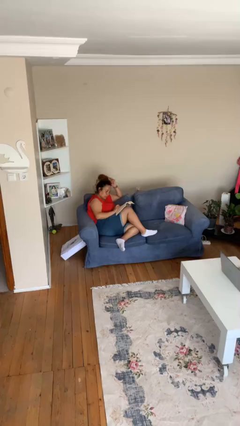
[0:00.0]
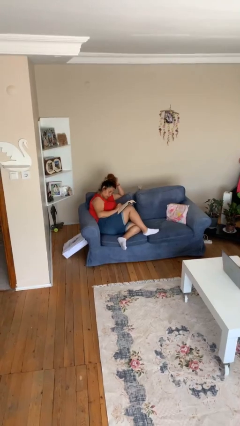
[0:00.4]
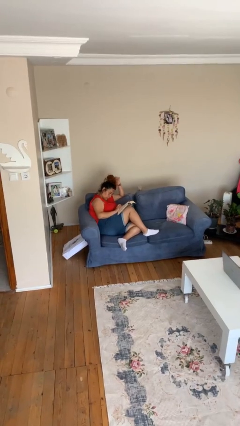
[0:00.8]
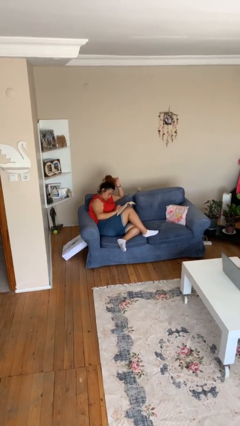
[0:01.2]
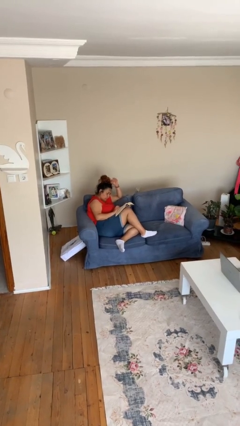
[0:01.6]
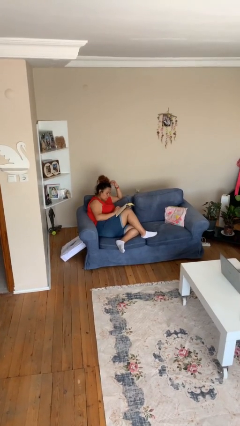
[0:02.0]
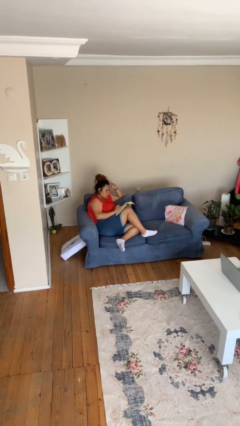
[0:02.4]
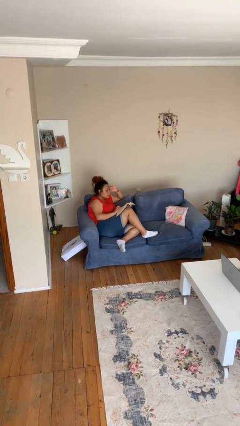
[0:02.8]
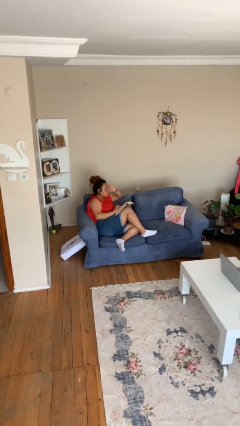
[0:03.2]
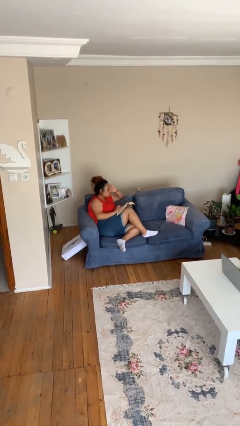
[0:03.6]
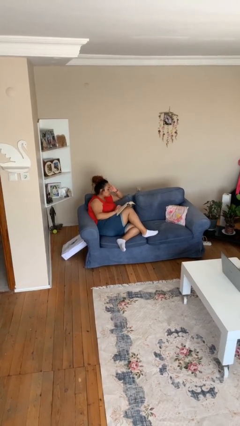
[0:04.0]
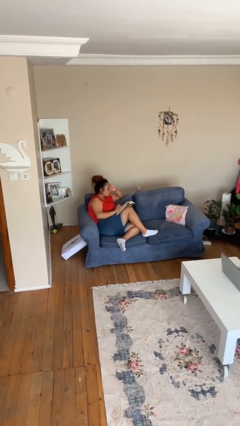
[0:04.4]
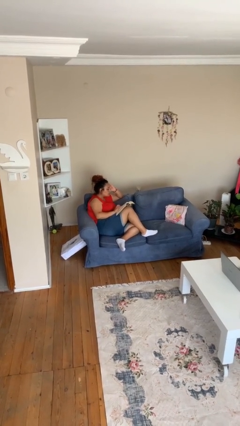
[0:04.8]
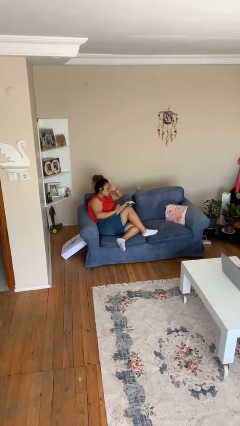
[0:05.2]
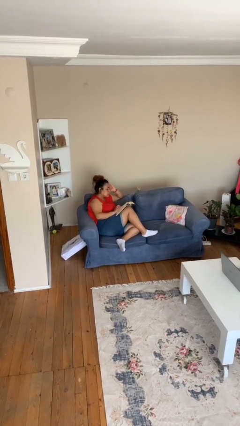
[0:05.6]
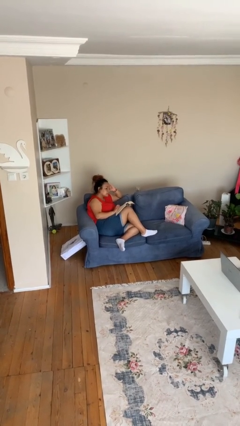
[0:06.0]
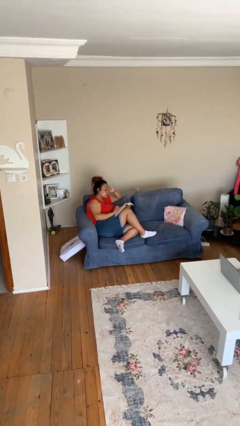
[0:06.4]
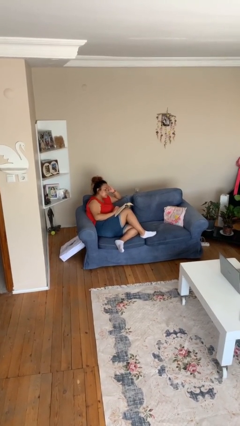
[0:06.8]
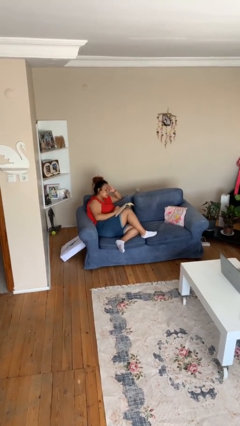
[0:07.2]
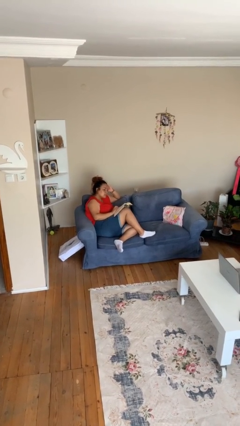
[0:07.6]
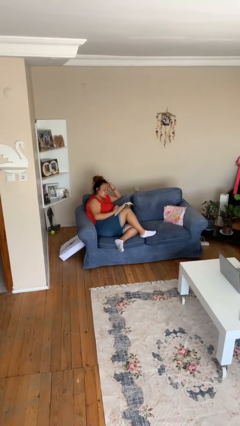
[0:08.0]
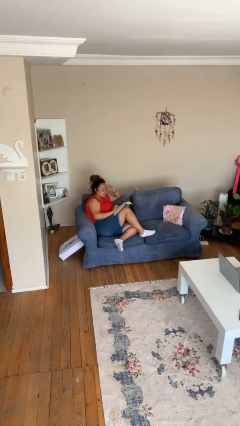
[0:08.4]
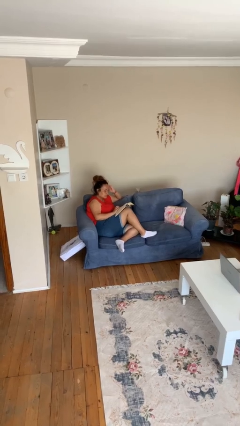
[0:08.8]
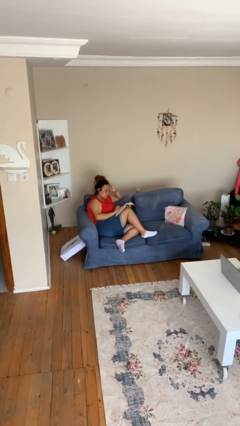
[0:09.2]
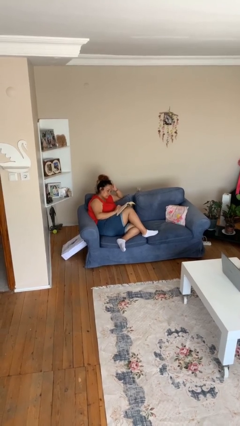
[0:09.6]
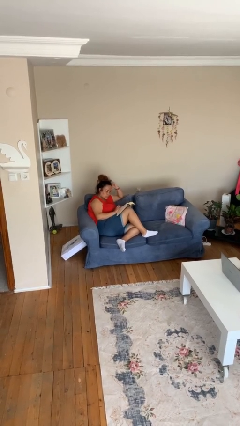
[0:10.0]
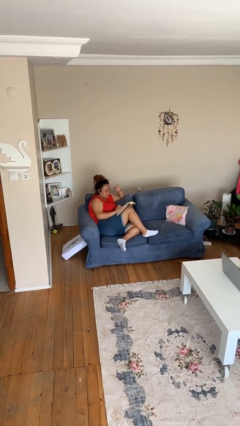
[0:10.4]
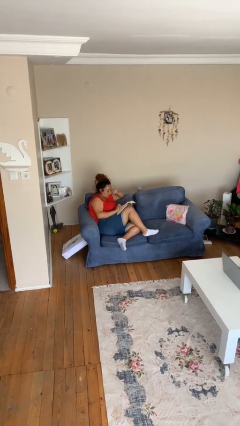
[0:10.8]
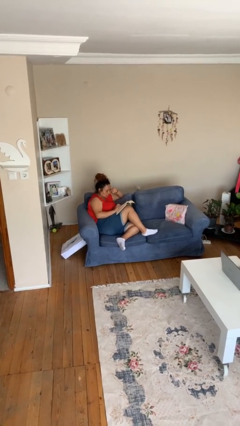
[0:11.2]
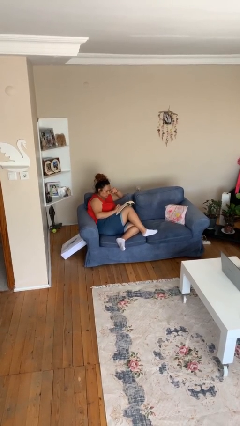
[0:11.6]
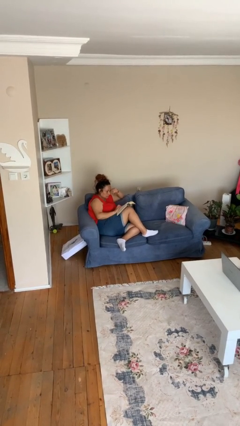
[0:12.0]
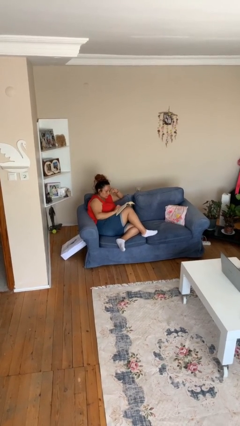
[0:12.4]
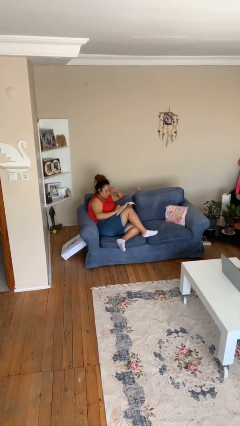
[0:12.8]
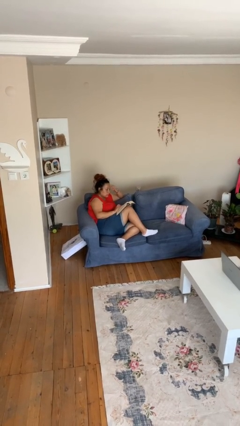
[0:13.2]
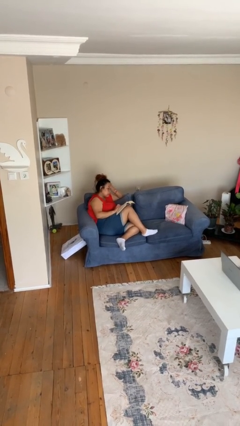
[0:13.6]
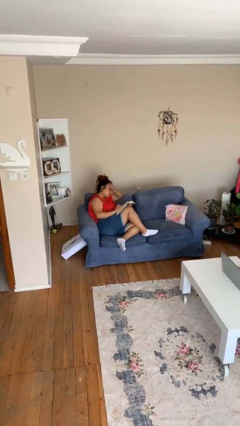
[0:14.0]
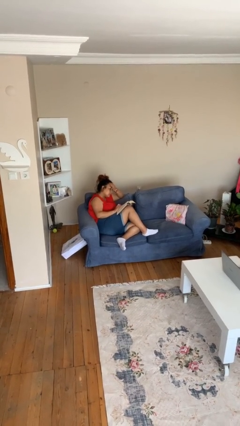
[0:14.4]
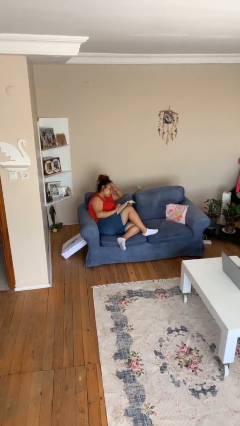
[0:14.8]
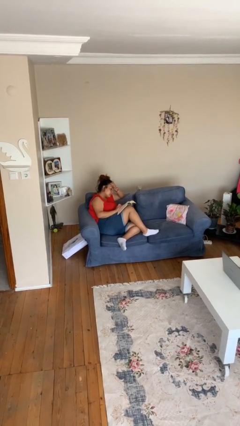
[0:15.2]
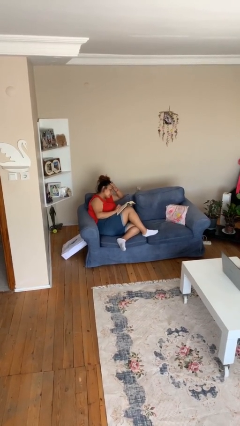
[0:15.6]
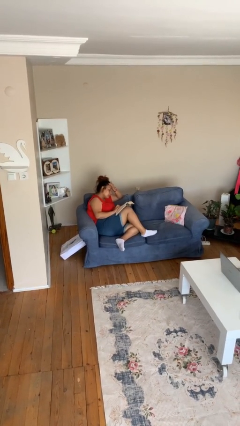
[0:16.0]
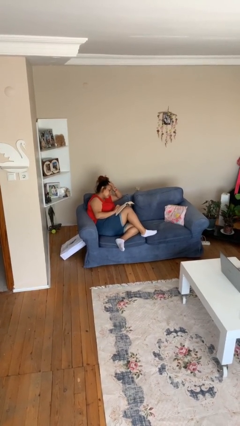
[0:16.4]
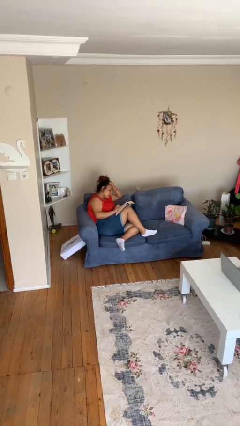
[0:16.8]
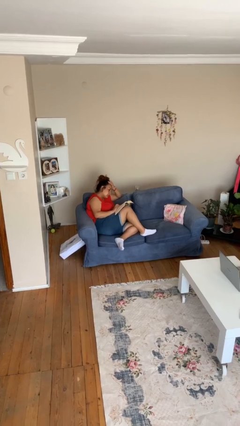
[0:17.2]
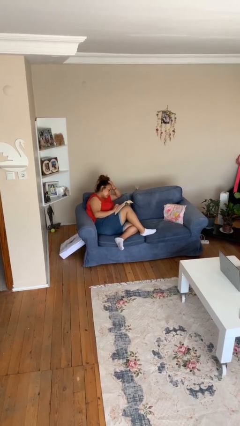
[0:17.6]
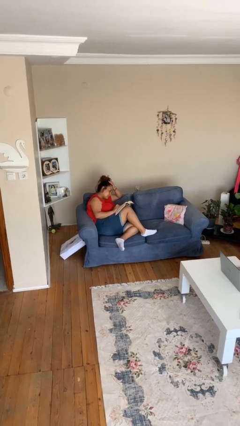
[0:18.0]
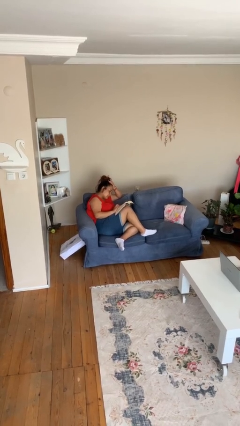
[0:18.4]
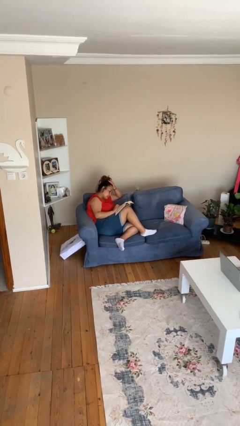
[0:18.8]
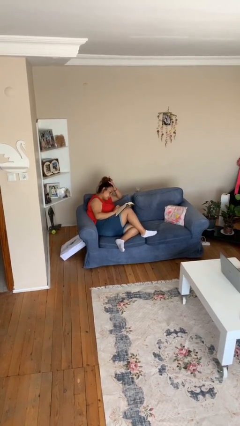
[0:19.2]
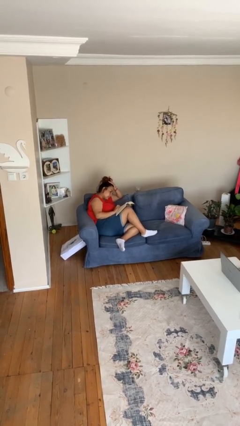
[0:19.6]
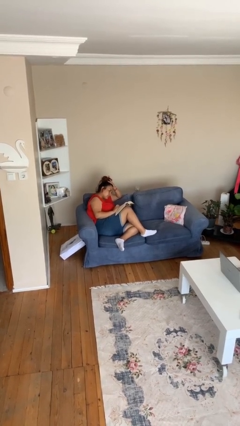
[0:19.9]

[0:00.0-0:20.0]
person reads document

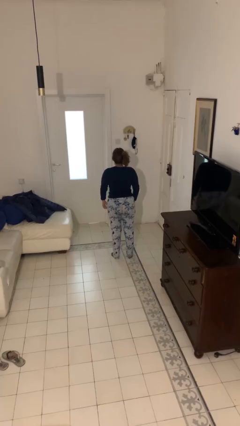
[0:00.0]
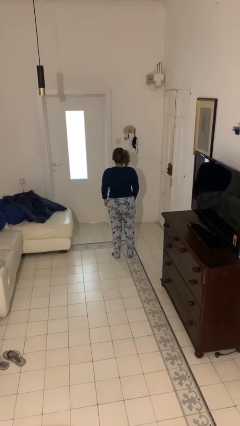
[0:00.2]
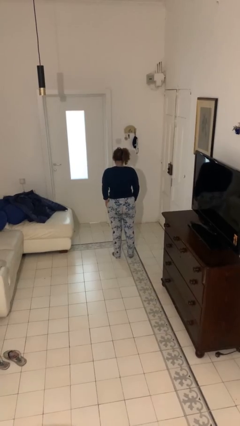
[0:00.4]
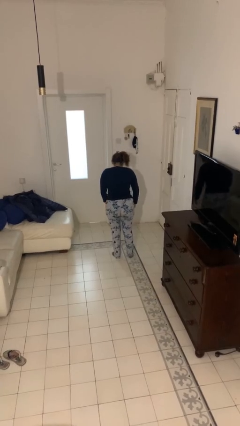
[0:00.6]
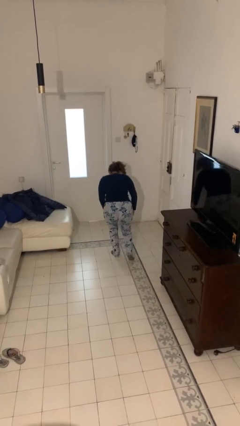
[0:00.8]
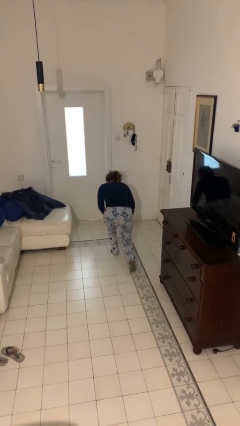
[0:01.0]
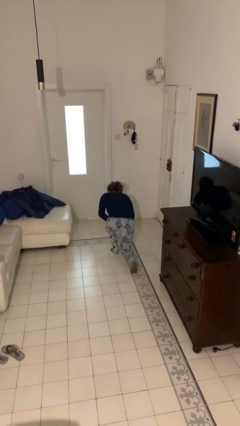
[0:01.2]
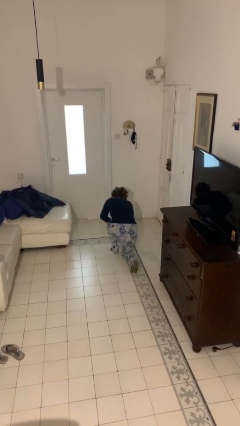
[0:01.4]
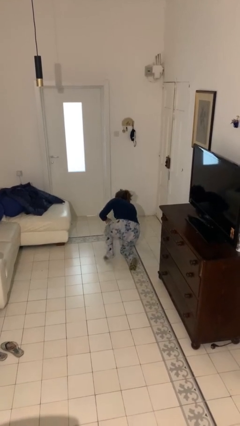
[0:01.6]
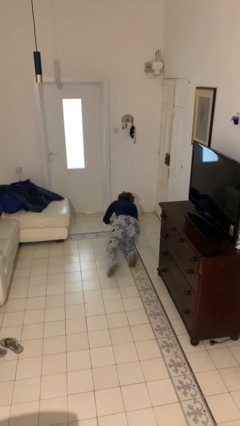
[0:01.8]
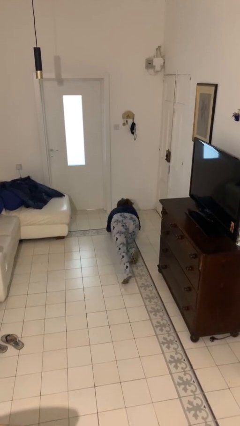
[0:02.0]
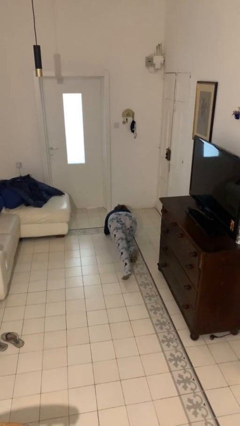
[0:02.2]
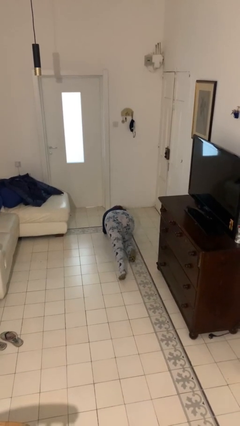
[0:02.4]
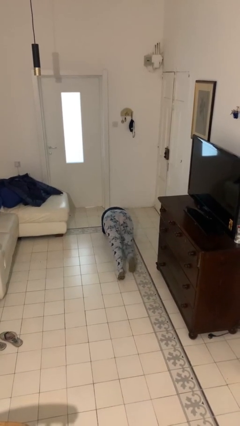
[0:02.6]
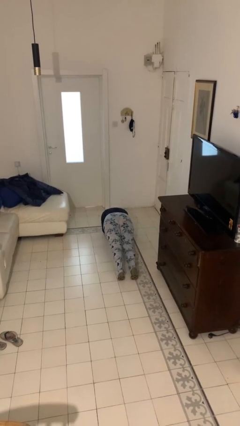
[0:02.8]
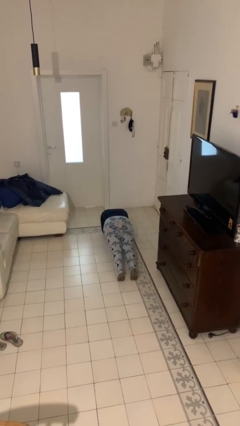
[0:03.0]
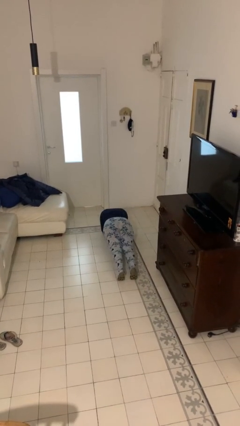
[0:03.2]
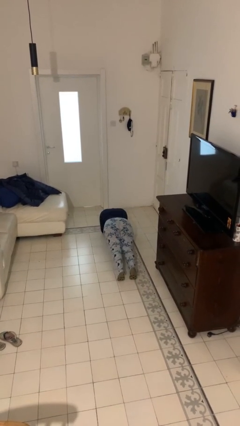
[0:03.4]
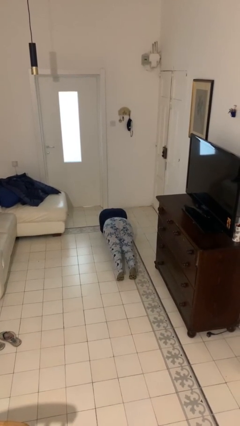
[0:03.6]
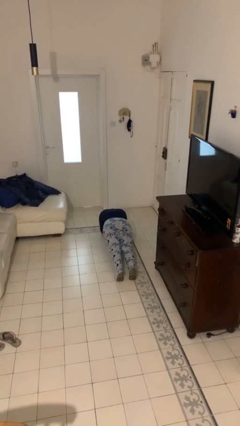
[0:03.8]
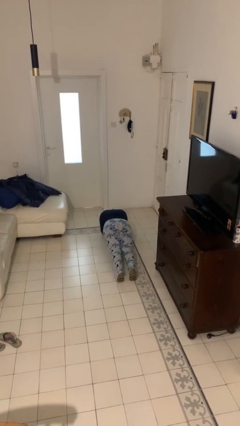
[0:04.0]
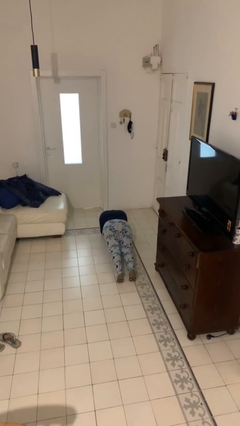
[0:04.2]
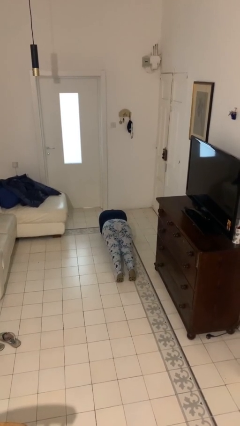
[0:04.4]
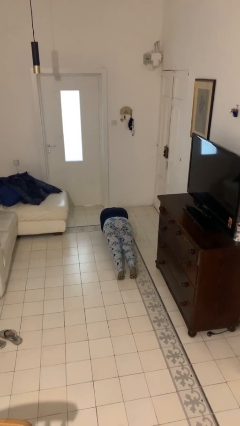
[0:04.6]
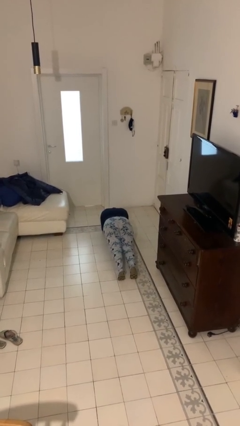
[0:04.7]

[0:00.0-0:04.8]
person exercises with plank

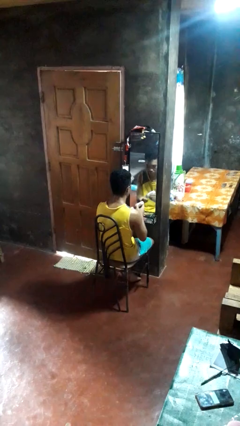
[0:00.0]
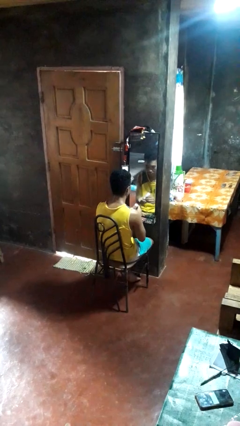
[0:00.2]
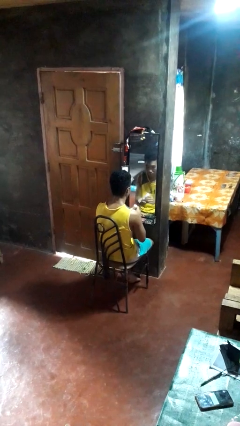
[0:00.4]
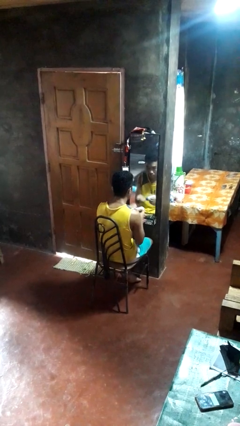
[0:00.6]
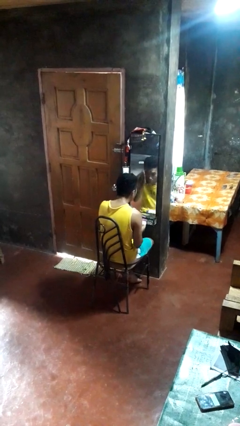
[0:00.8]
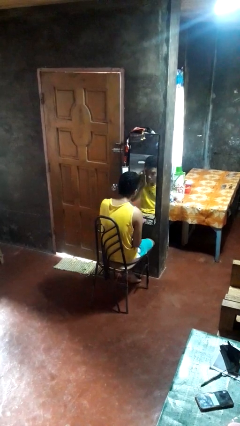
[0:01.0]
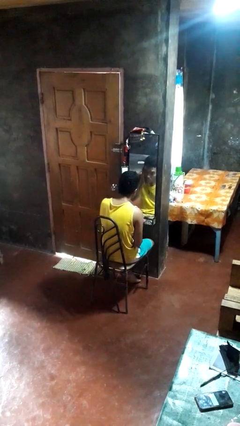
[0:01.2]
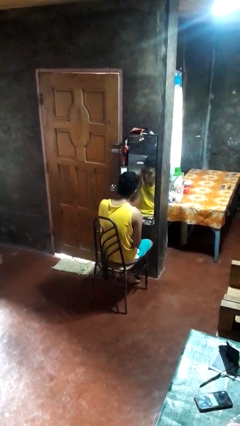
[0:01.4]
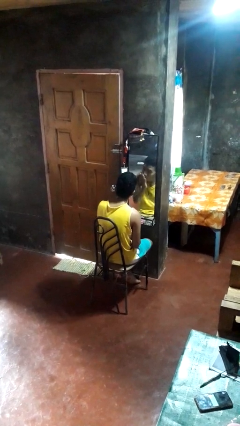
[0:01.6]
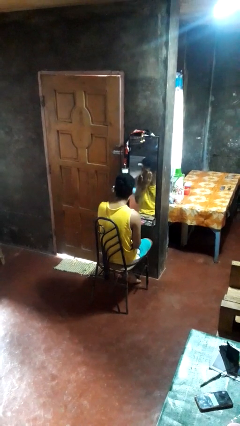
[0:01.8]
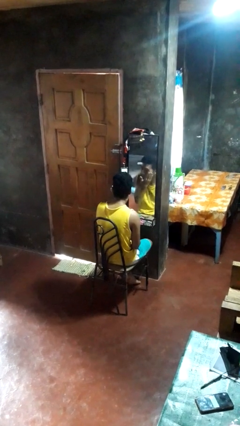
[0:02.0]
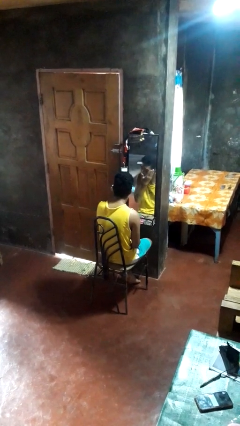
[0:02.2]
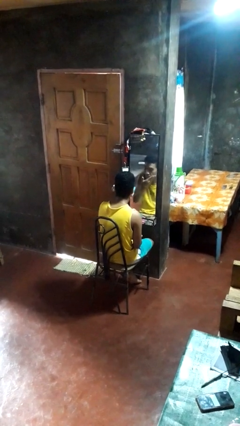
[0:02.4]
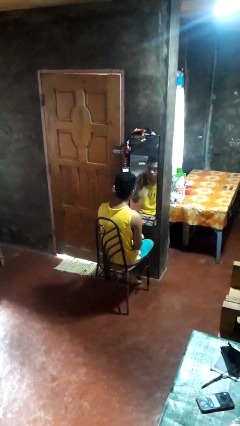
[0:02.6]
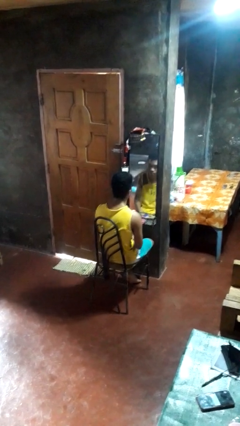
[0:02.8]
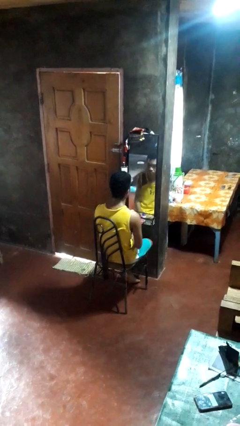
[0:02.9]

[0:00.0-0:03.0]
person applies foundation makeup
